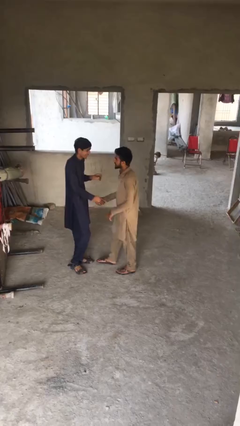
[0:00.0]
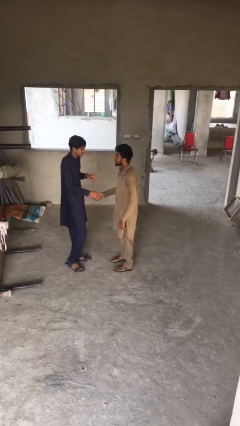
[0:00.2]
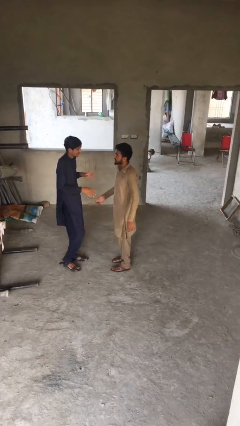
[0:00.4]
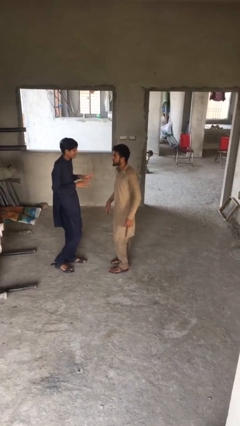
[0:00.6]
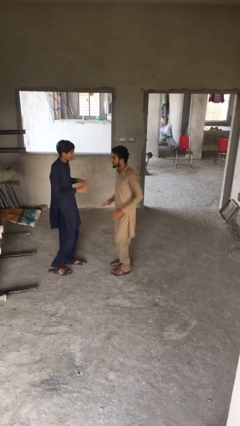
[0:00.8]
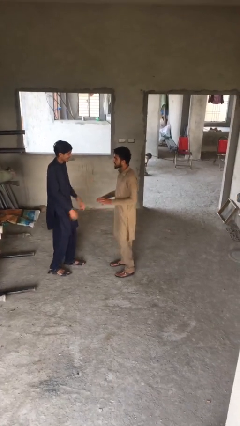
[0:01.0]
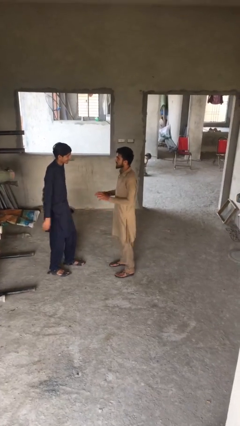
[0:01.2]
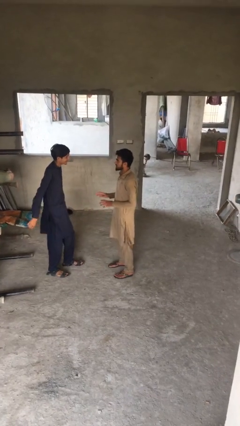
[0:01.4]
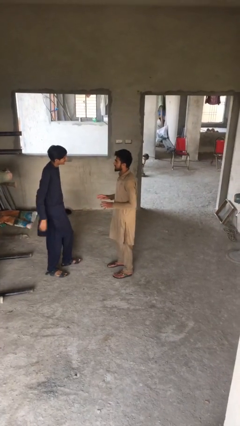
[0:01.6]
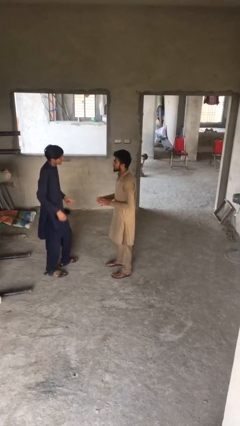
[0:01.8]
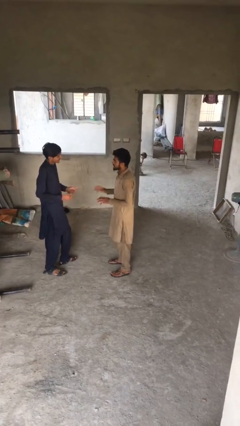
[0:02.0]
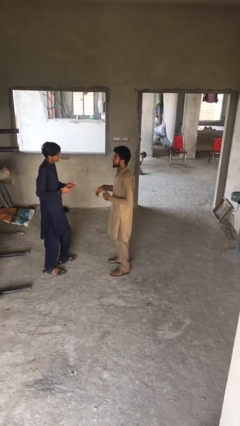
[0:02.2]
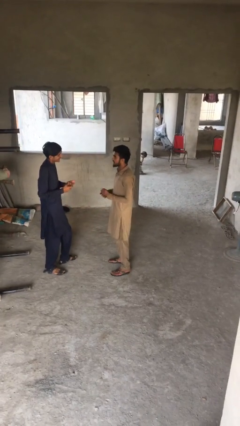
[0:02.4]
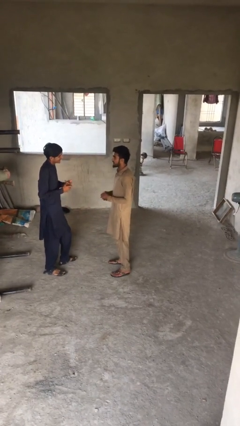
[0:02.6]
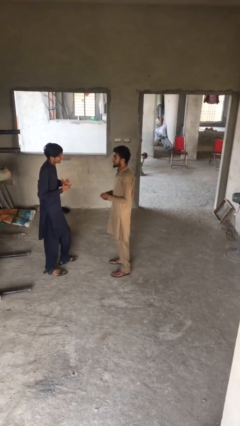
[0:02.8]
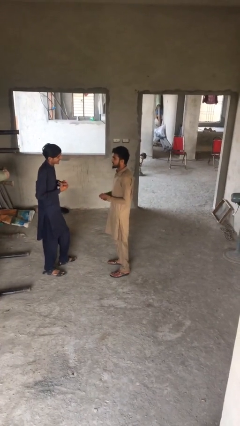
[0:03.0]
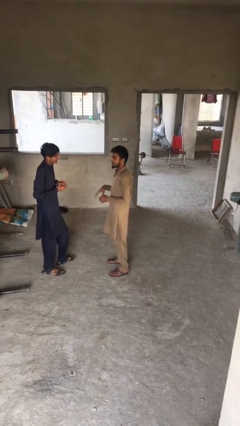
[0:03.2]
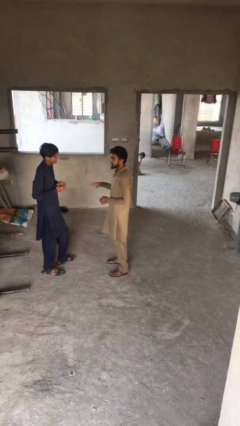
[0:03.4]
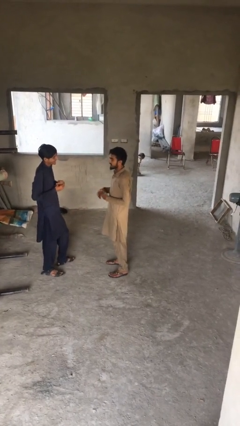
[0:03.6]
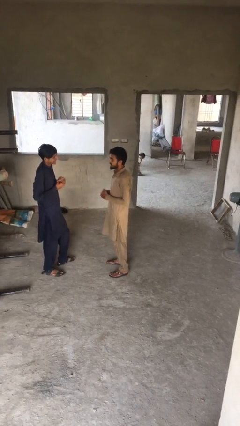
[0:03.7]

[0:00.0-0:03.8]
person talks to person

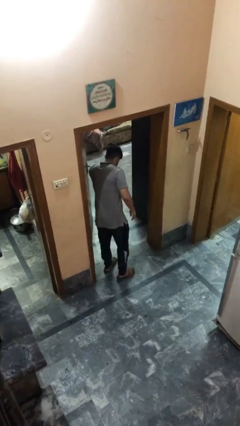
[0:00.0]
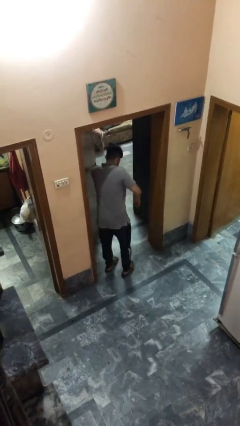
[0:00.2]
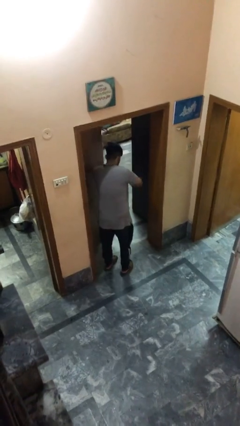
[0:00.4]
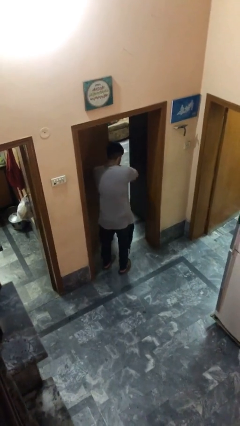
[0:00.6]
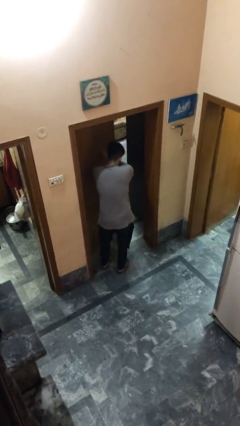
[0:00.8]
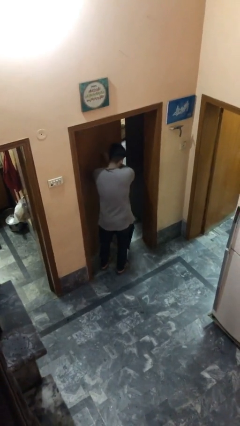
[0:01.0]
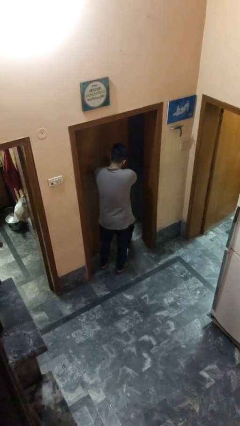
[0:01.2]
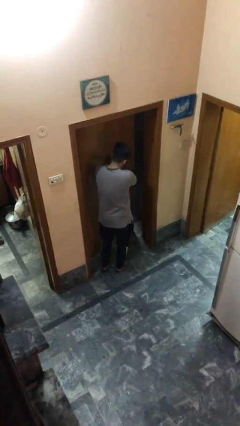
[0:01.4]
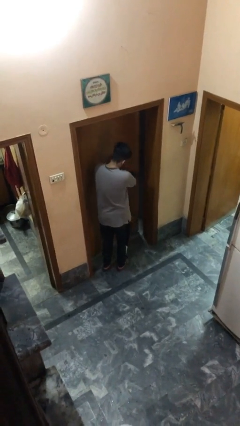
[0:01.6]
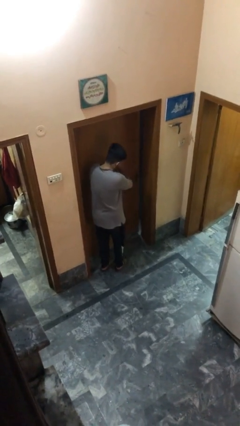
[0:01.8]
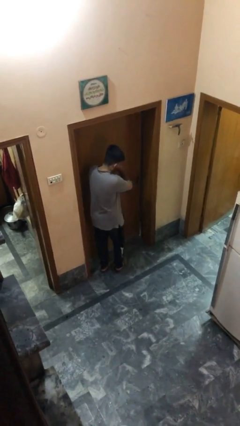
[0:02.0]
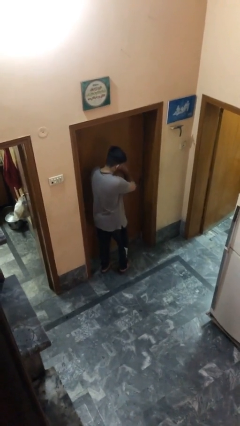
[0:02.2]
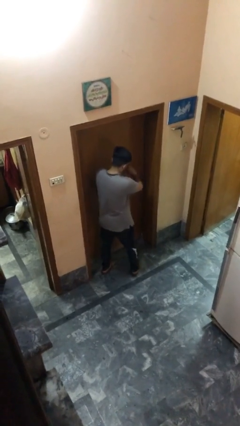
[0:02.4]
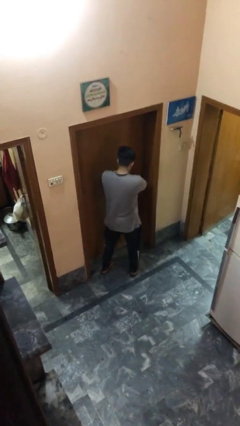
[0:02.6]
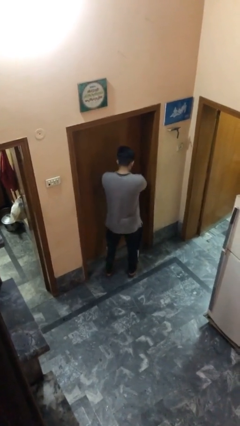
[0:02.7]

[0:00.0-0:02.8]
person closes facility door

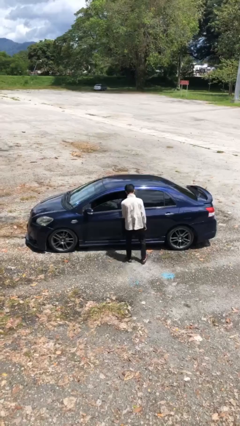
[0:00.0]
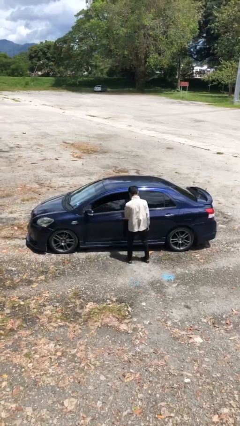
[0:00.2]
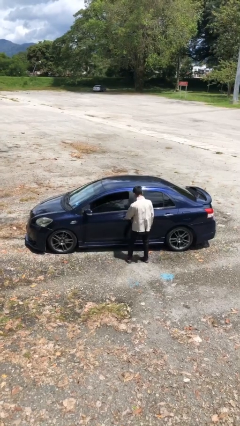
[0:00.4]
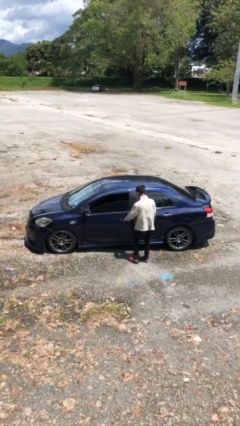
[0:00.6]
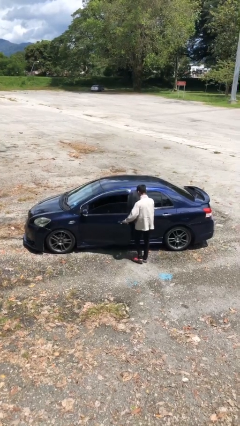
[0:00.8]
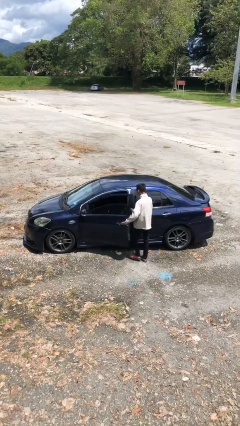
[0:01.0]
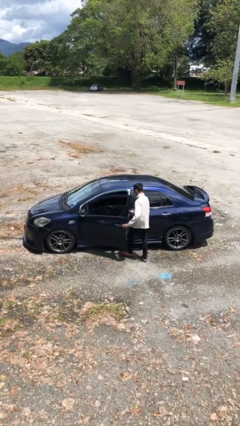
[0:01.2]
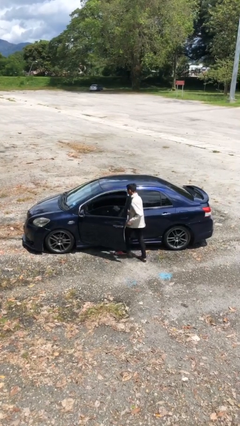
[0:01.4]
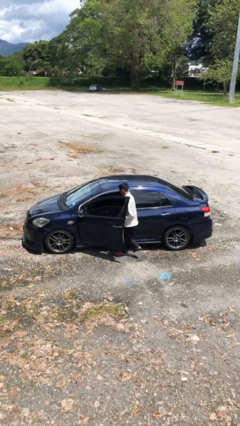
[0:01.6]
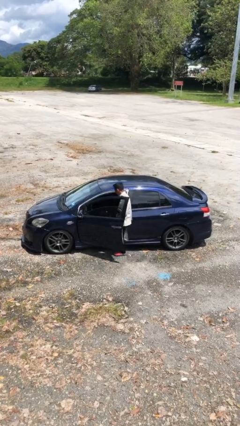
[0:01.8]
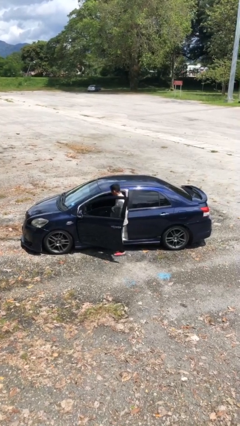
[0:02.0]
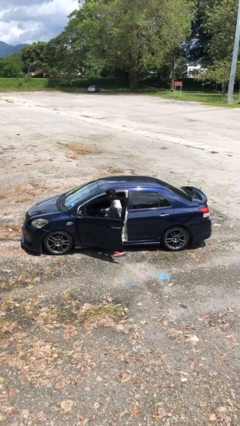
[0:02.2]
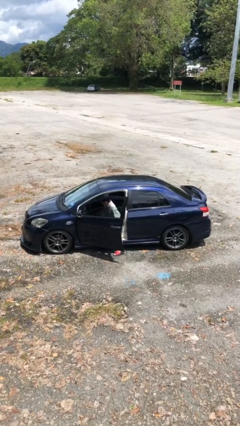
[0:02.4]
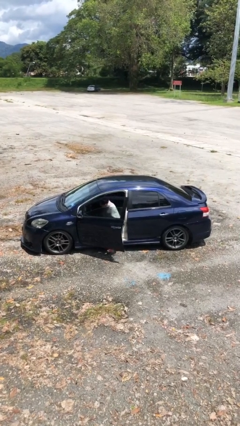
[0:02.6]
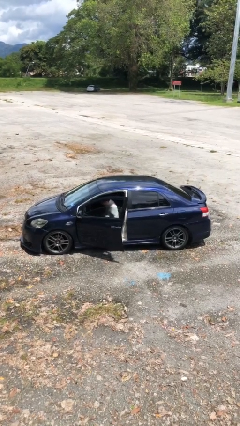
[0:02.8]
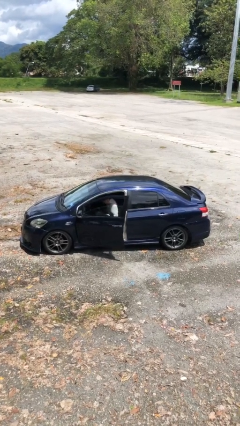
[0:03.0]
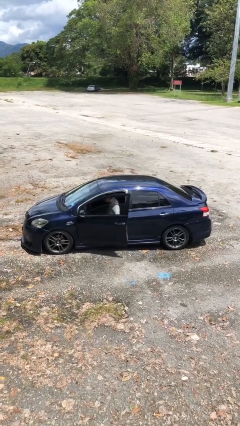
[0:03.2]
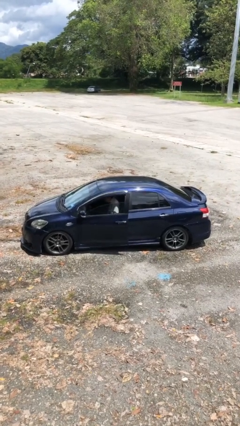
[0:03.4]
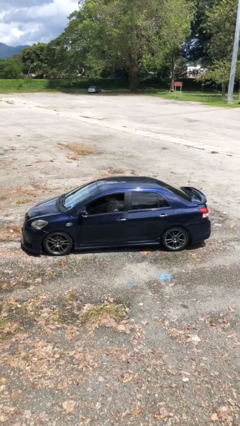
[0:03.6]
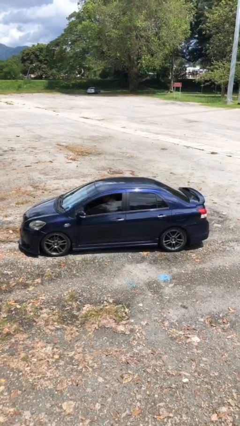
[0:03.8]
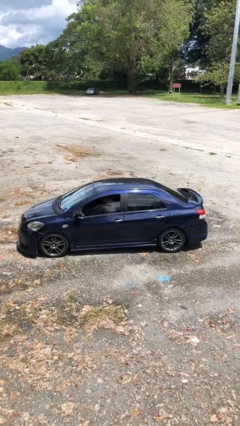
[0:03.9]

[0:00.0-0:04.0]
car picks up person

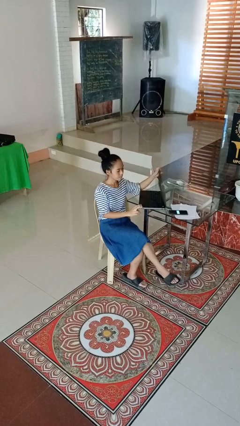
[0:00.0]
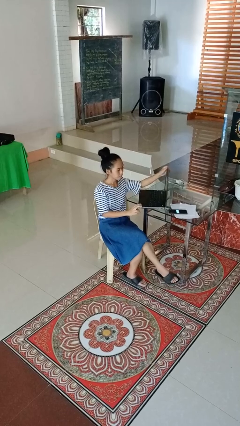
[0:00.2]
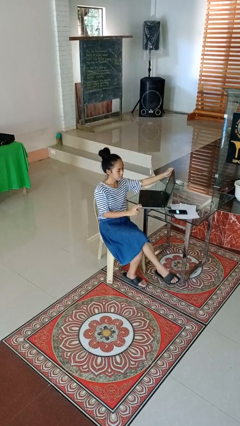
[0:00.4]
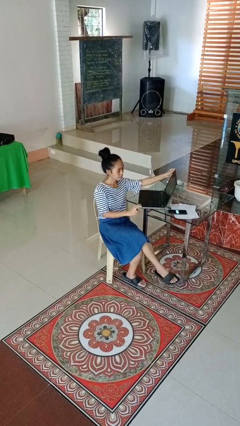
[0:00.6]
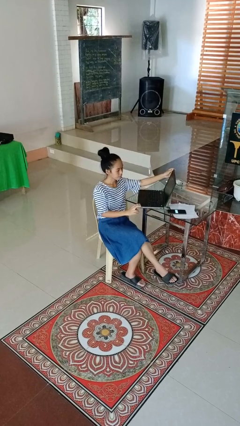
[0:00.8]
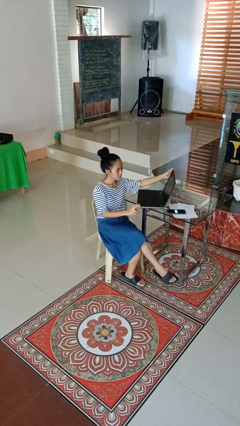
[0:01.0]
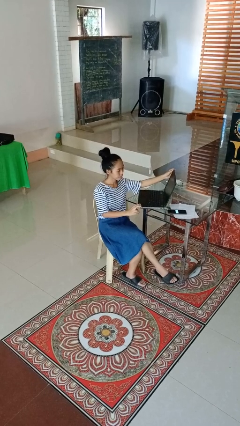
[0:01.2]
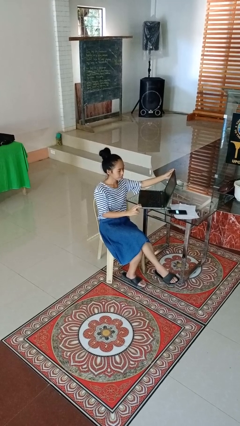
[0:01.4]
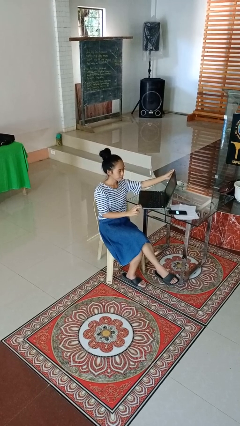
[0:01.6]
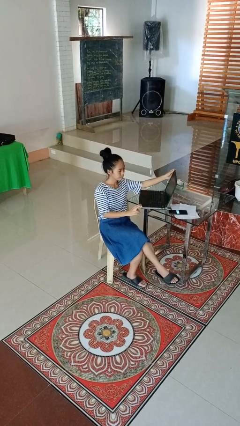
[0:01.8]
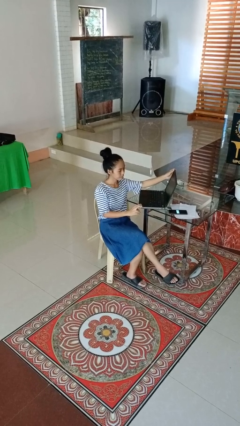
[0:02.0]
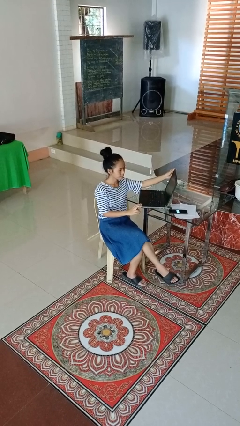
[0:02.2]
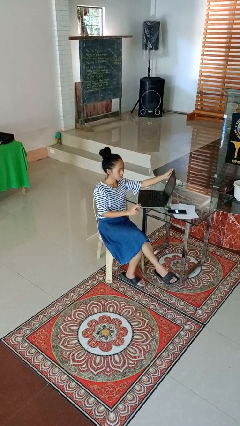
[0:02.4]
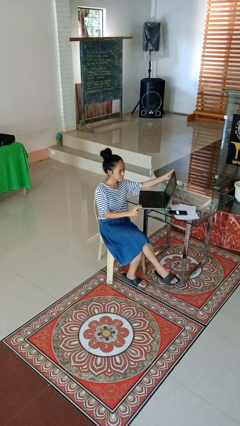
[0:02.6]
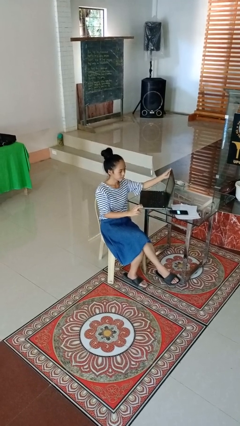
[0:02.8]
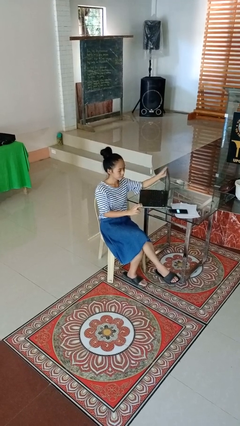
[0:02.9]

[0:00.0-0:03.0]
person opens laptop

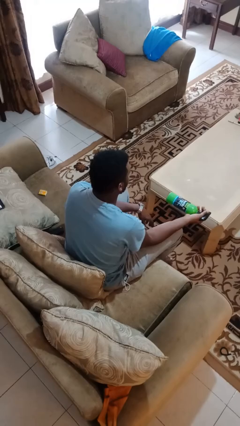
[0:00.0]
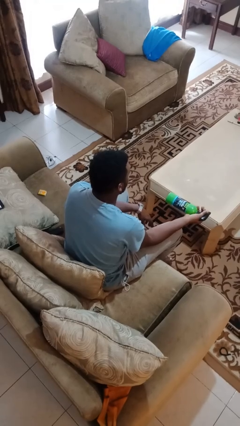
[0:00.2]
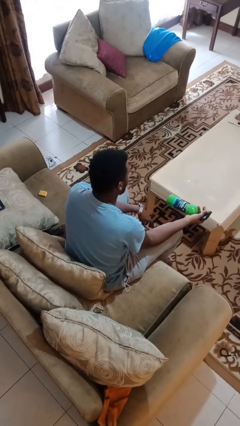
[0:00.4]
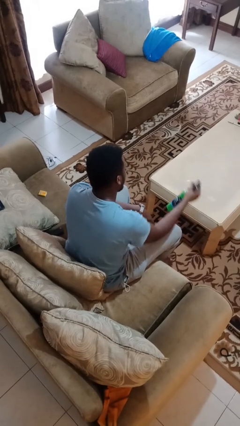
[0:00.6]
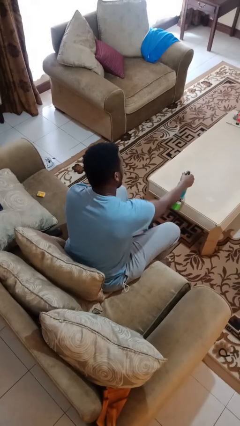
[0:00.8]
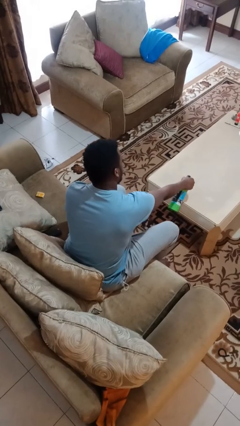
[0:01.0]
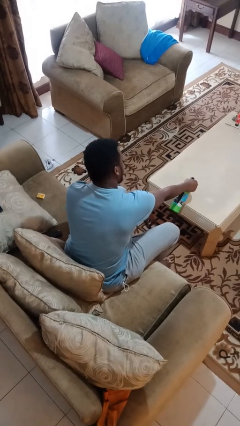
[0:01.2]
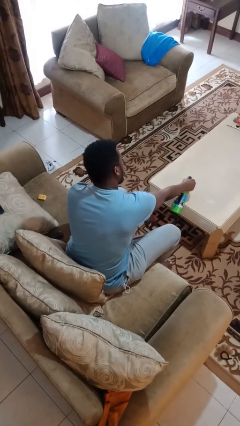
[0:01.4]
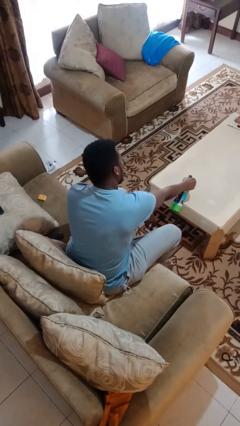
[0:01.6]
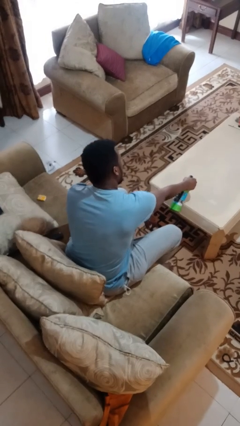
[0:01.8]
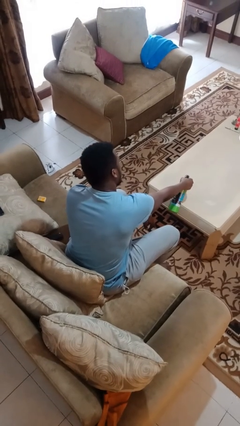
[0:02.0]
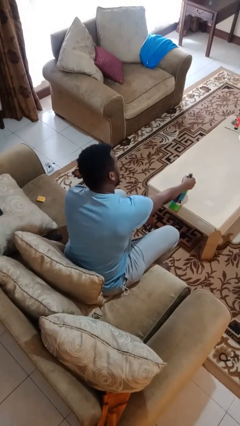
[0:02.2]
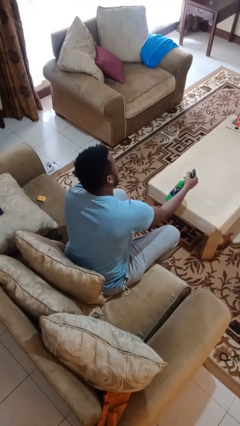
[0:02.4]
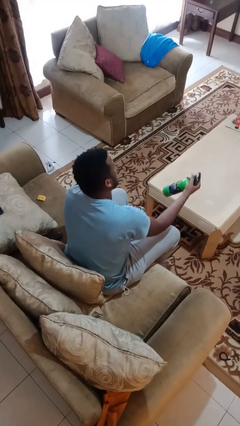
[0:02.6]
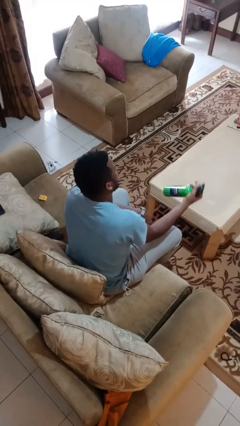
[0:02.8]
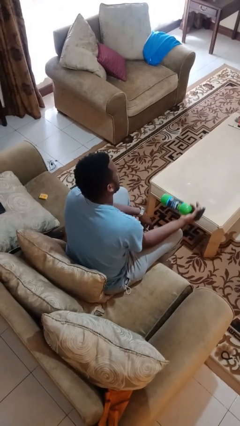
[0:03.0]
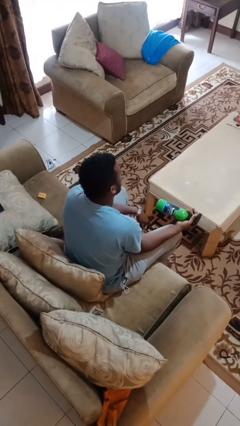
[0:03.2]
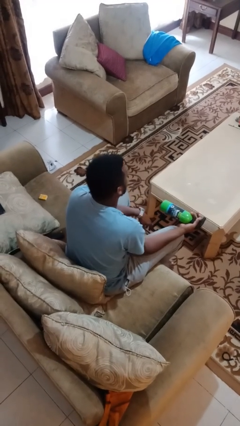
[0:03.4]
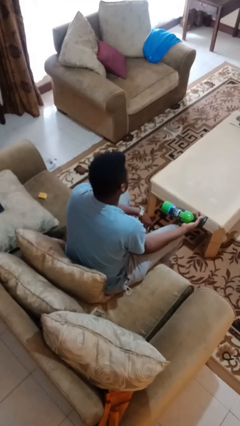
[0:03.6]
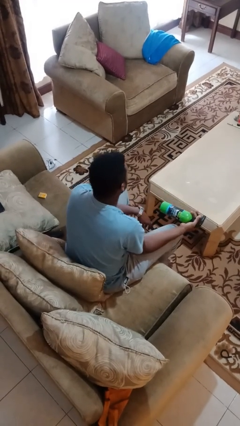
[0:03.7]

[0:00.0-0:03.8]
person sprays from bottle

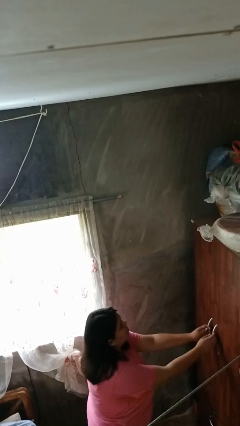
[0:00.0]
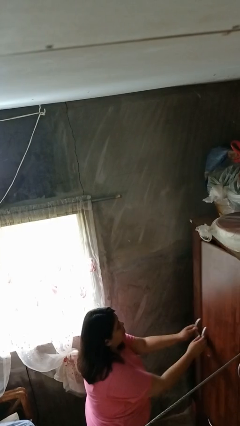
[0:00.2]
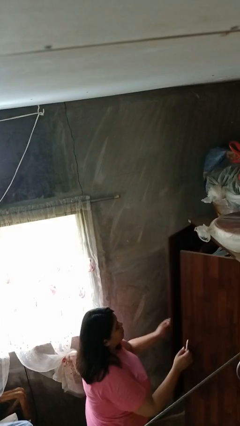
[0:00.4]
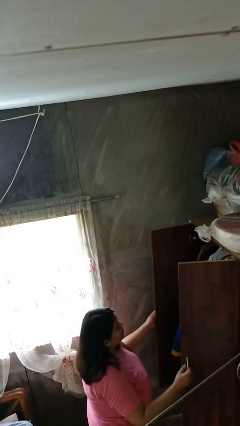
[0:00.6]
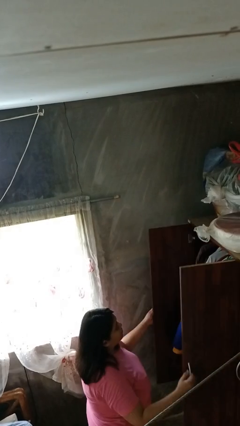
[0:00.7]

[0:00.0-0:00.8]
person opens closet door
